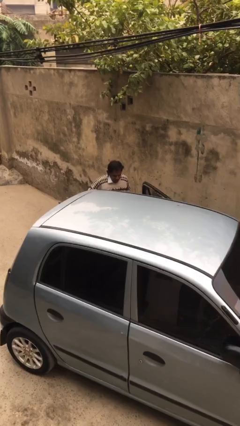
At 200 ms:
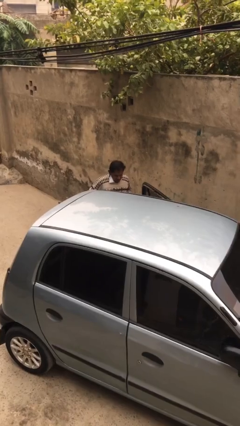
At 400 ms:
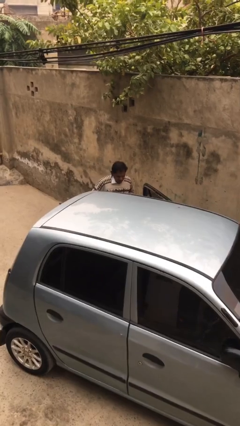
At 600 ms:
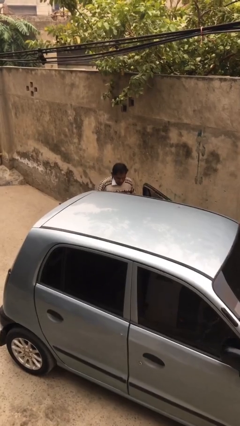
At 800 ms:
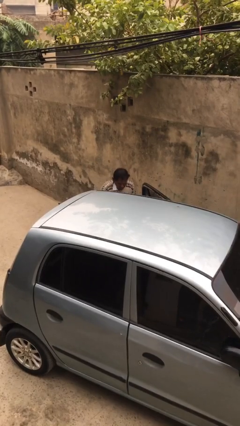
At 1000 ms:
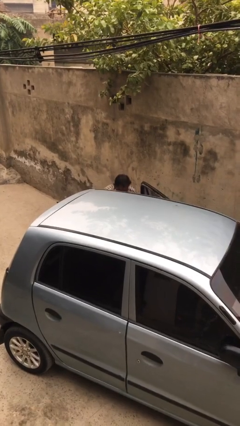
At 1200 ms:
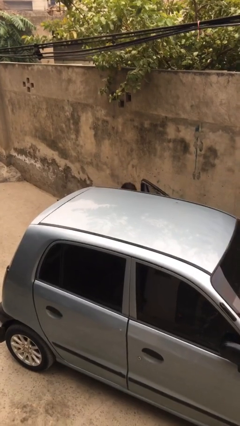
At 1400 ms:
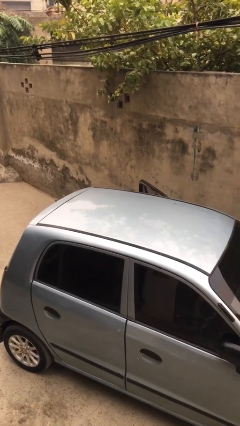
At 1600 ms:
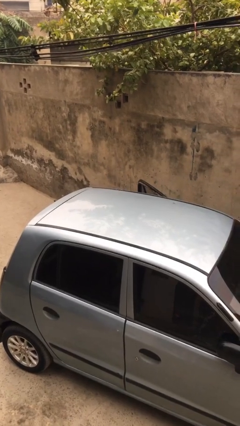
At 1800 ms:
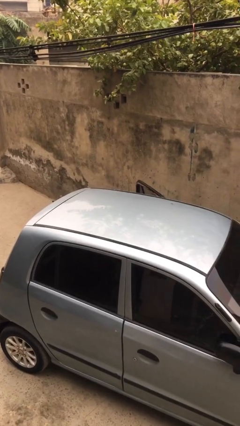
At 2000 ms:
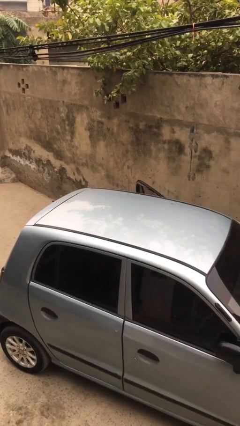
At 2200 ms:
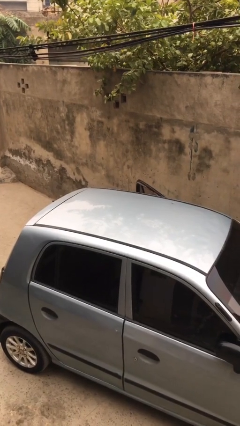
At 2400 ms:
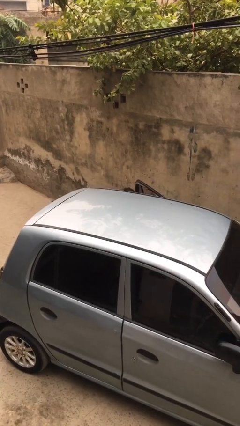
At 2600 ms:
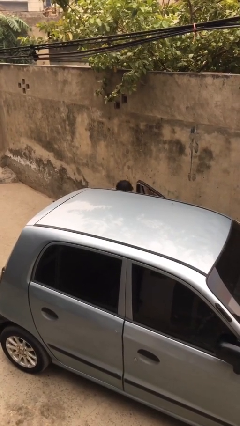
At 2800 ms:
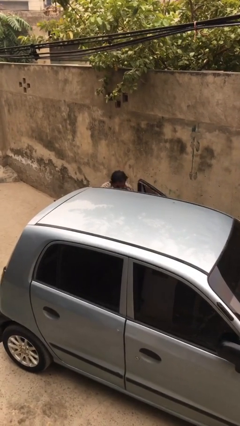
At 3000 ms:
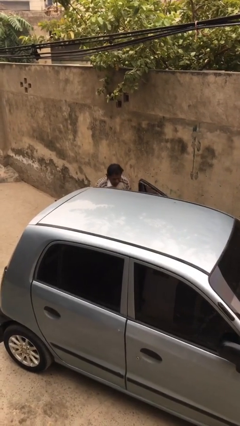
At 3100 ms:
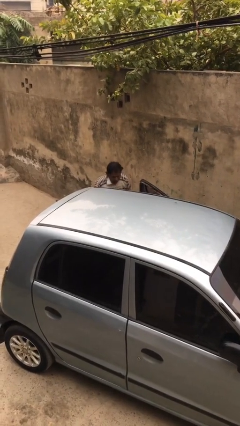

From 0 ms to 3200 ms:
person loads car

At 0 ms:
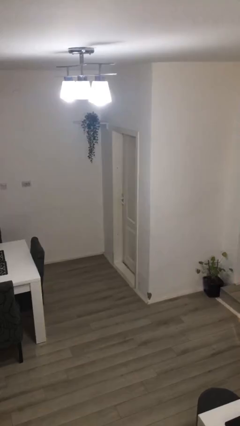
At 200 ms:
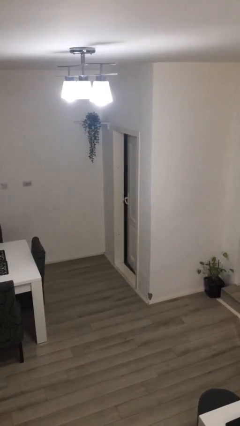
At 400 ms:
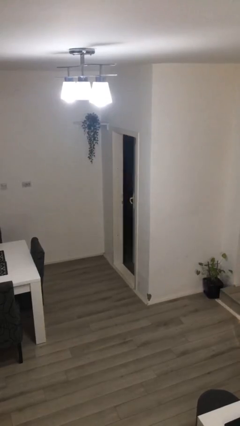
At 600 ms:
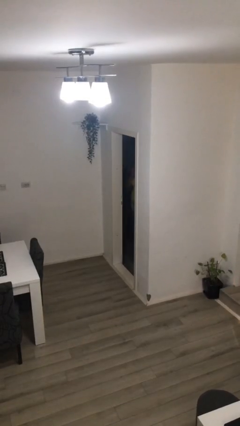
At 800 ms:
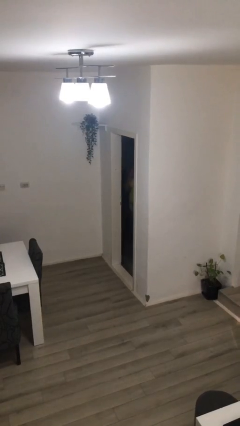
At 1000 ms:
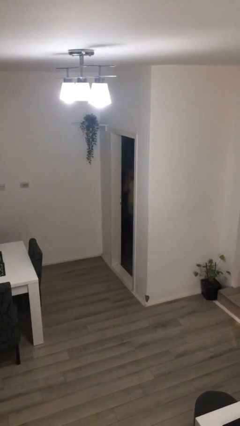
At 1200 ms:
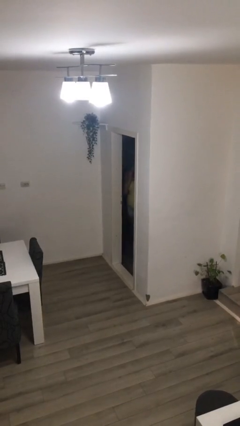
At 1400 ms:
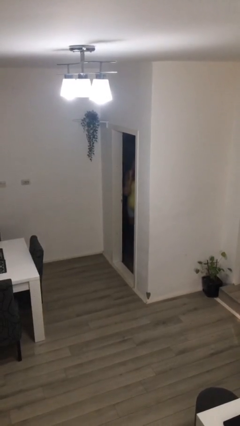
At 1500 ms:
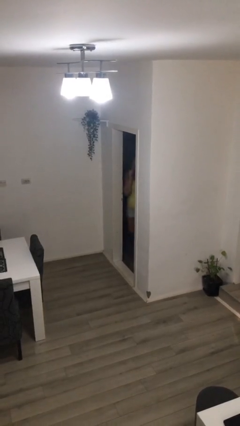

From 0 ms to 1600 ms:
person opens facility door

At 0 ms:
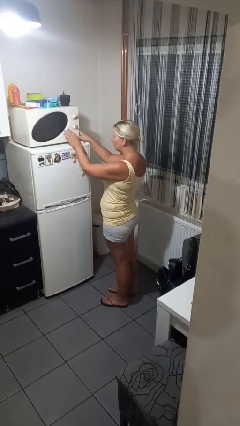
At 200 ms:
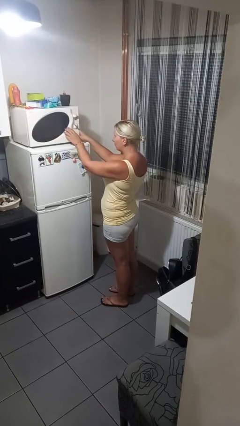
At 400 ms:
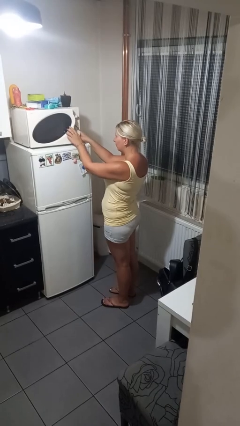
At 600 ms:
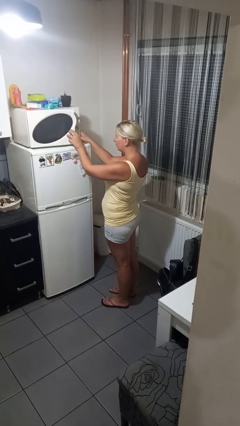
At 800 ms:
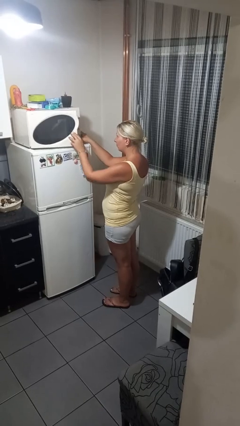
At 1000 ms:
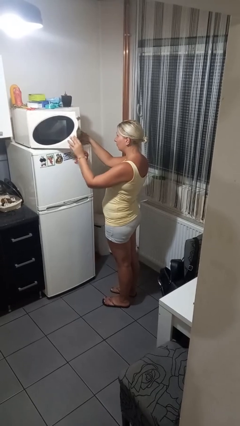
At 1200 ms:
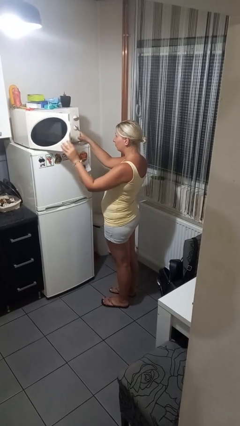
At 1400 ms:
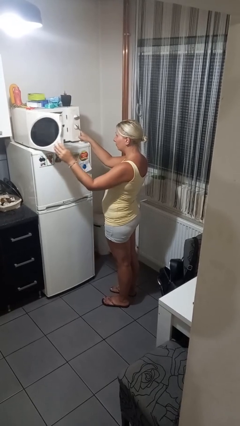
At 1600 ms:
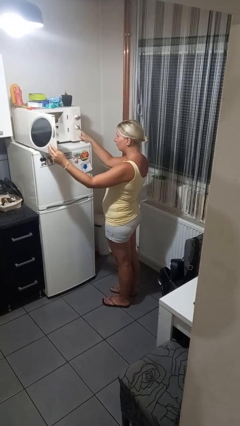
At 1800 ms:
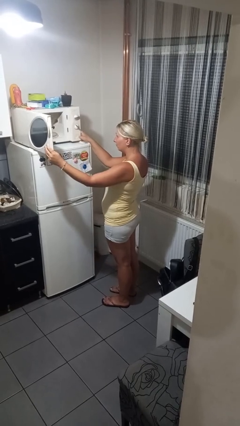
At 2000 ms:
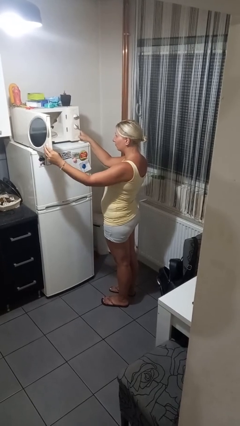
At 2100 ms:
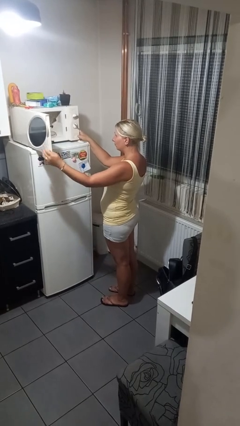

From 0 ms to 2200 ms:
person opens microwave

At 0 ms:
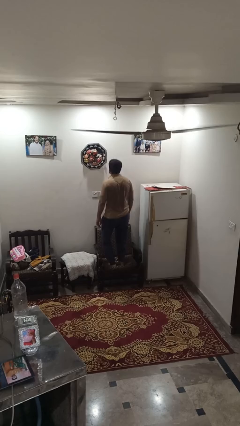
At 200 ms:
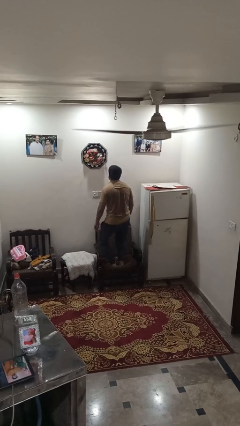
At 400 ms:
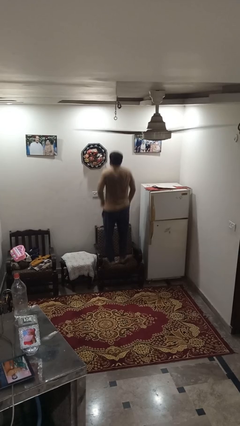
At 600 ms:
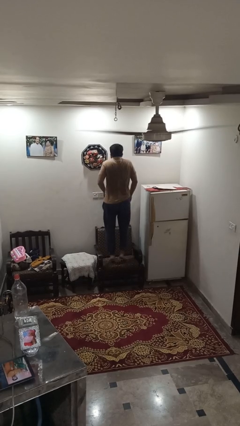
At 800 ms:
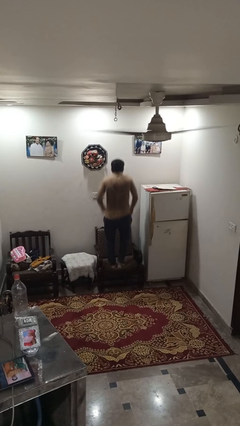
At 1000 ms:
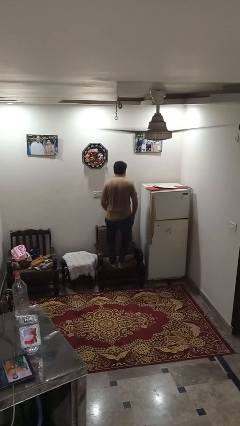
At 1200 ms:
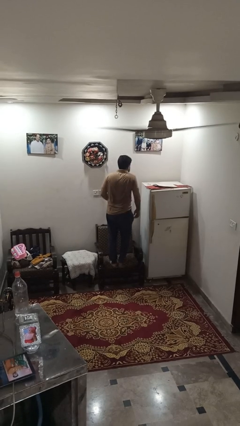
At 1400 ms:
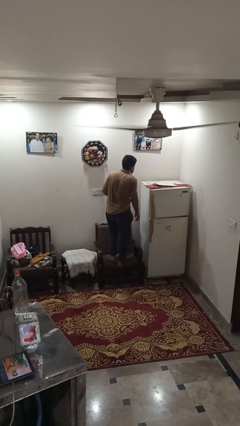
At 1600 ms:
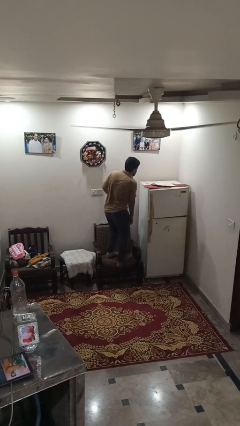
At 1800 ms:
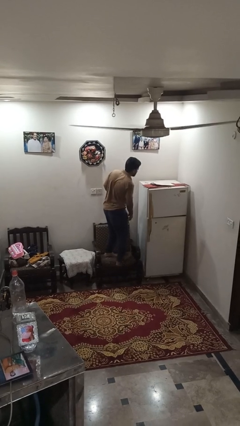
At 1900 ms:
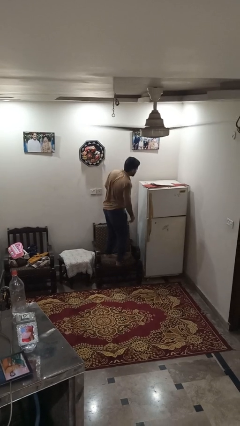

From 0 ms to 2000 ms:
person jumps on couch

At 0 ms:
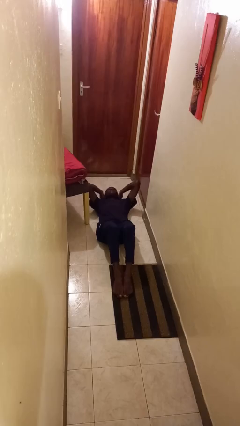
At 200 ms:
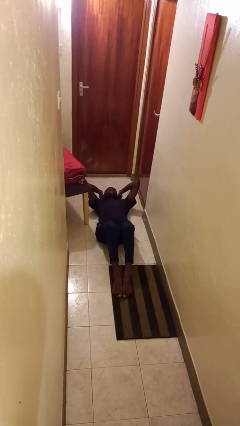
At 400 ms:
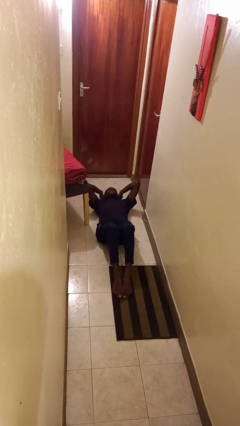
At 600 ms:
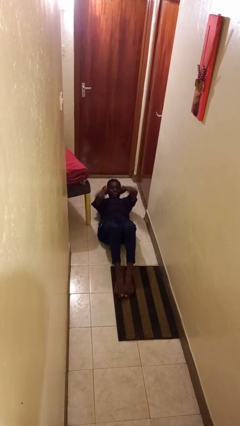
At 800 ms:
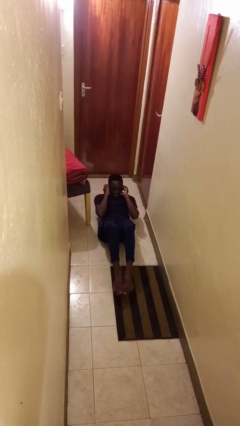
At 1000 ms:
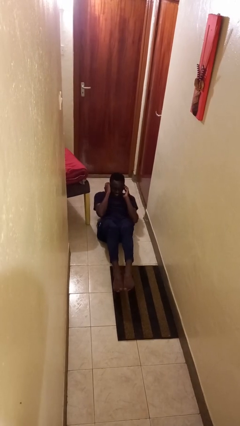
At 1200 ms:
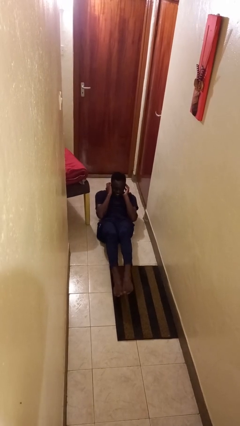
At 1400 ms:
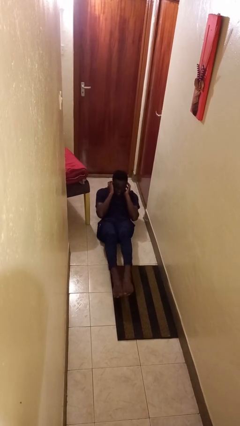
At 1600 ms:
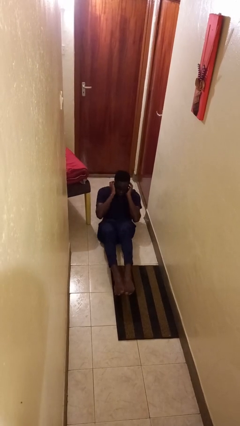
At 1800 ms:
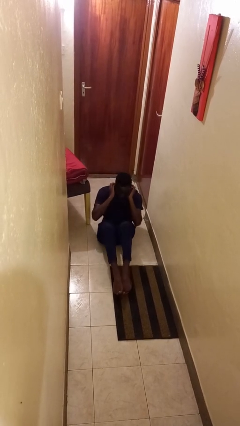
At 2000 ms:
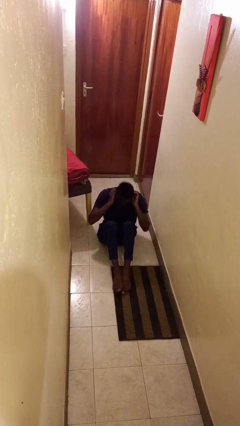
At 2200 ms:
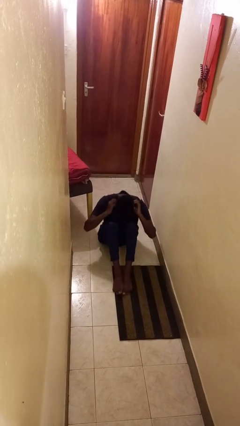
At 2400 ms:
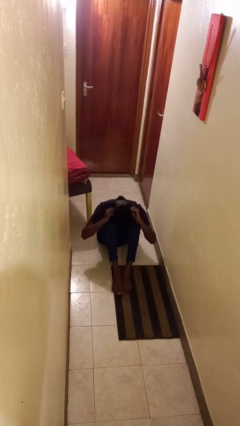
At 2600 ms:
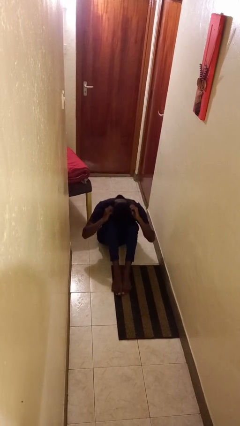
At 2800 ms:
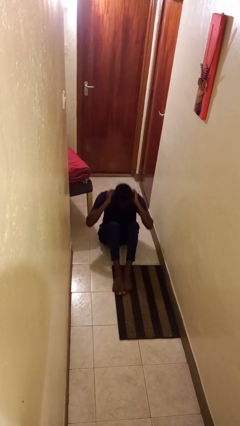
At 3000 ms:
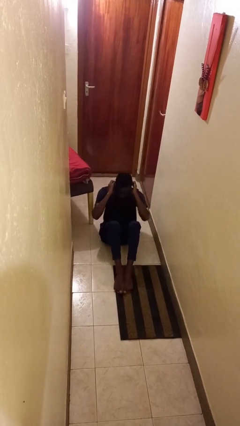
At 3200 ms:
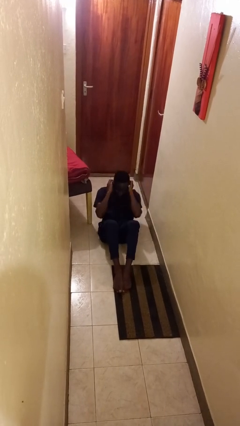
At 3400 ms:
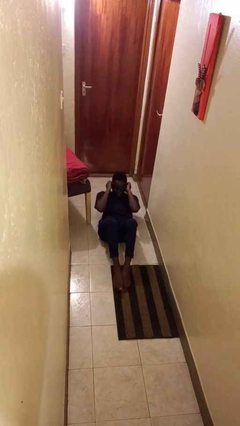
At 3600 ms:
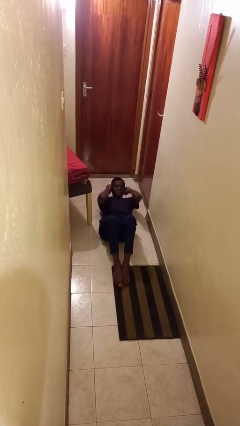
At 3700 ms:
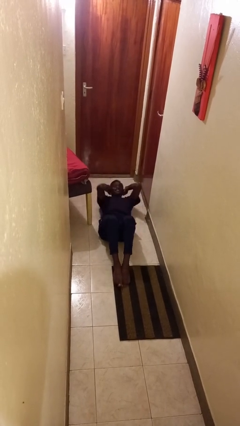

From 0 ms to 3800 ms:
person exercises with situp

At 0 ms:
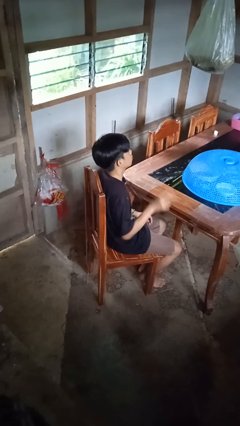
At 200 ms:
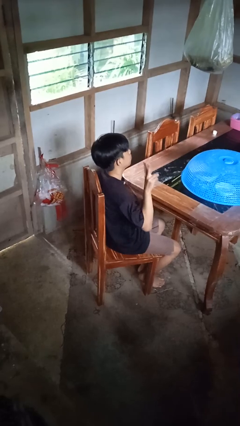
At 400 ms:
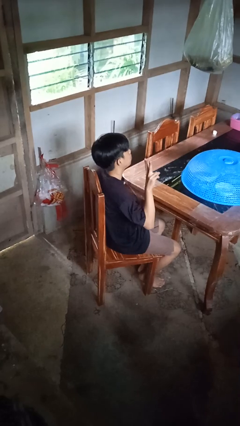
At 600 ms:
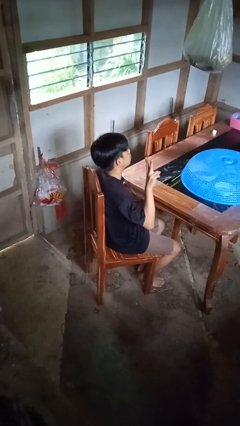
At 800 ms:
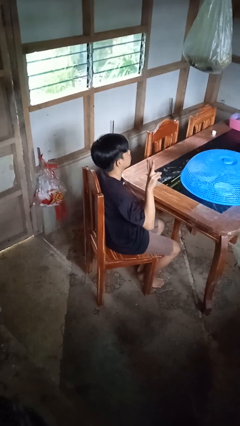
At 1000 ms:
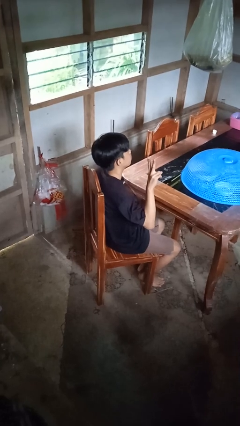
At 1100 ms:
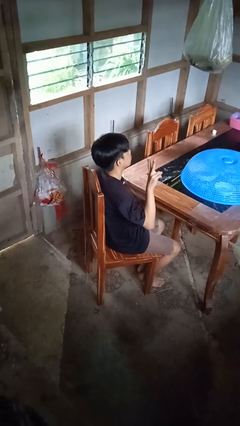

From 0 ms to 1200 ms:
person gestures peace

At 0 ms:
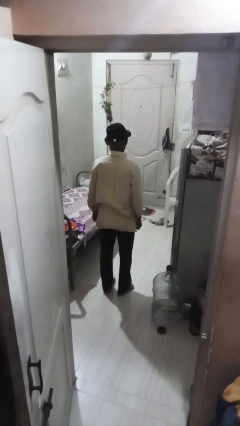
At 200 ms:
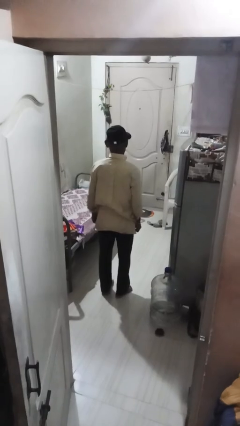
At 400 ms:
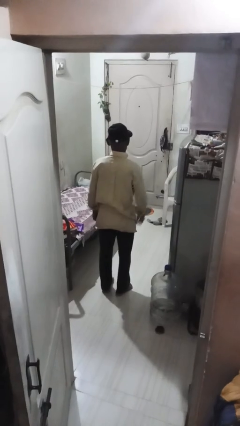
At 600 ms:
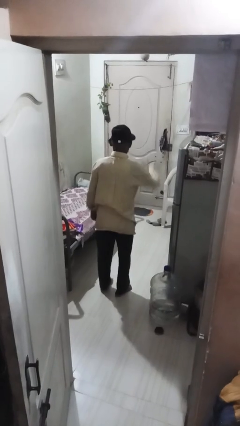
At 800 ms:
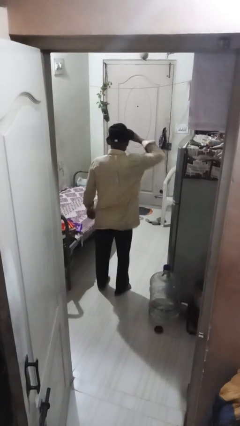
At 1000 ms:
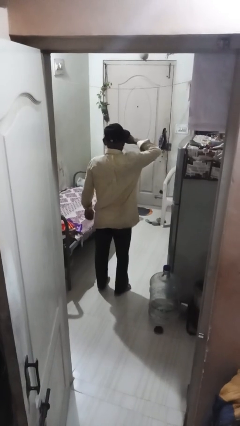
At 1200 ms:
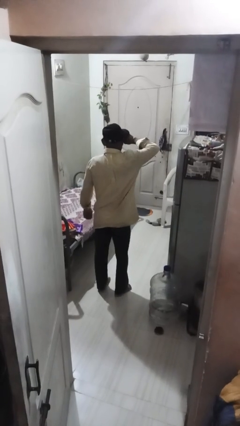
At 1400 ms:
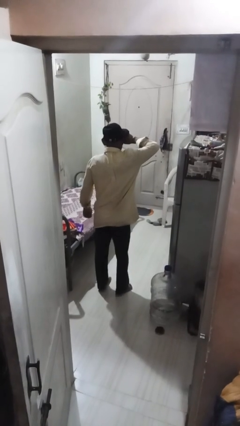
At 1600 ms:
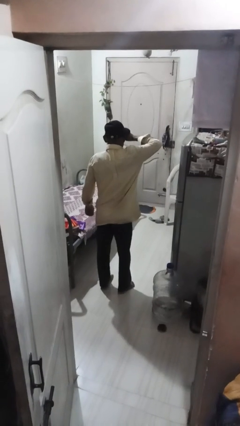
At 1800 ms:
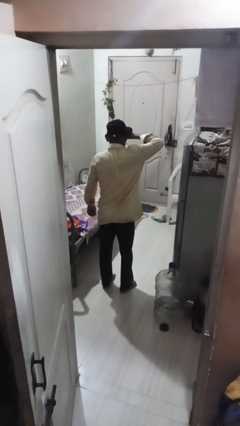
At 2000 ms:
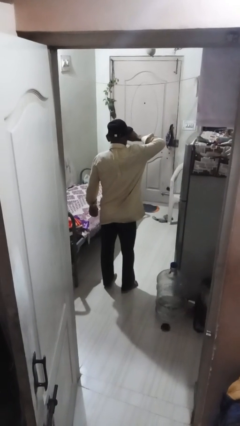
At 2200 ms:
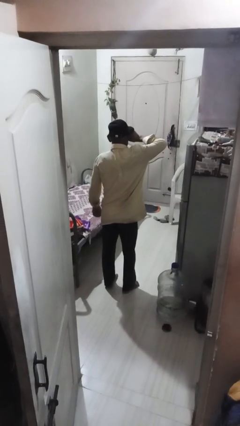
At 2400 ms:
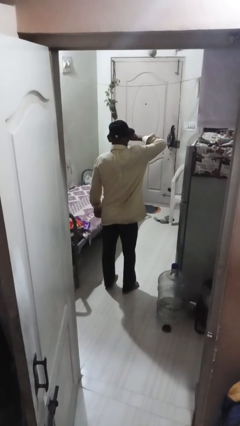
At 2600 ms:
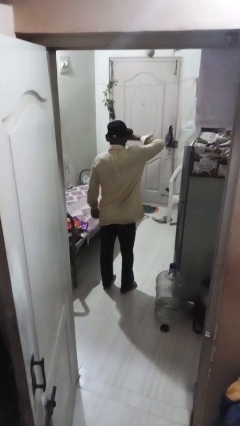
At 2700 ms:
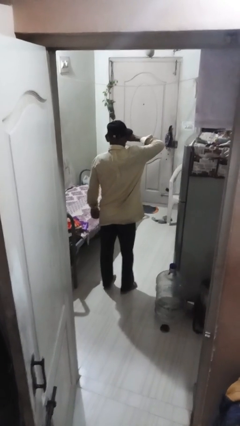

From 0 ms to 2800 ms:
person rubs eyes
